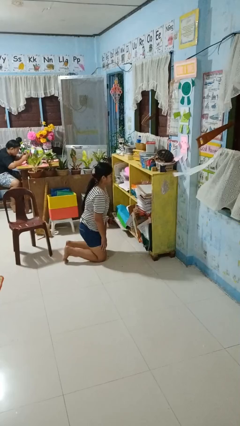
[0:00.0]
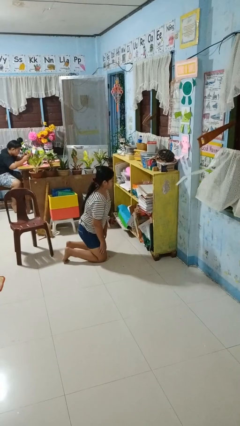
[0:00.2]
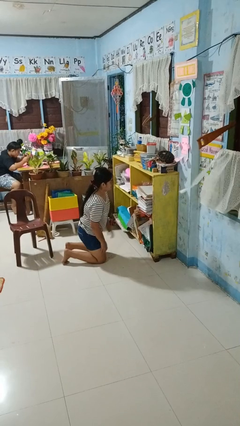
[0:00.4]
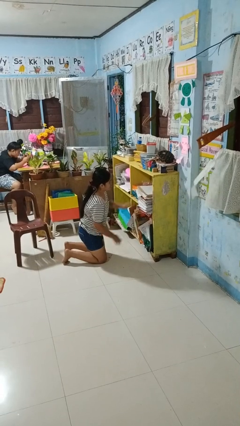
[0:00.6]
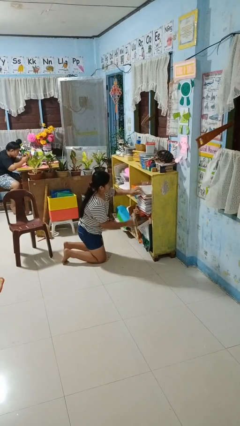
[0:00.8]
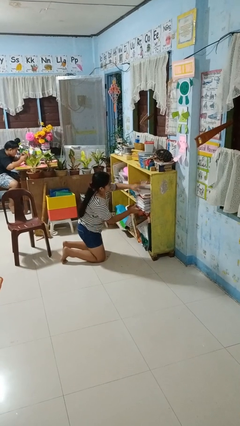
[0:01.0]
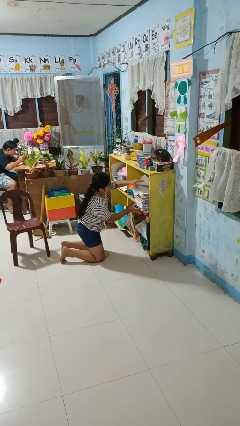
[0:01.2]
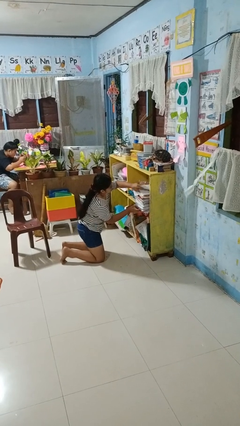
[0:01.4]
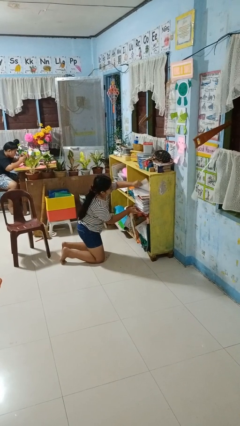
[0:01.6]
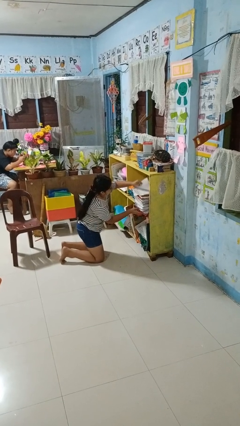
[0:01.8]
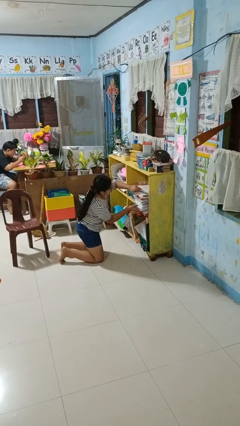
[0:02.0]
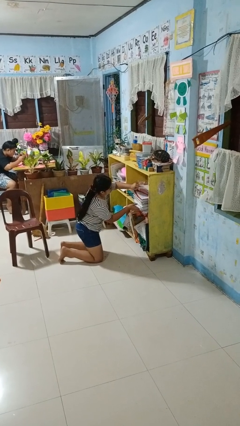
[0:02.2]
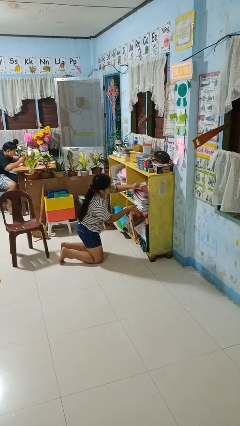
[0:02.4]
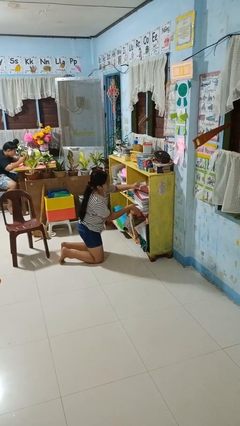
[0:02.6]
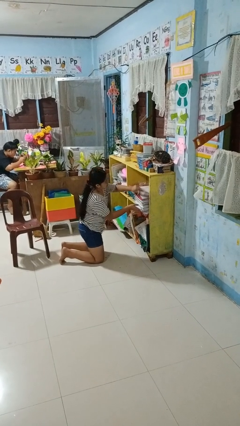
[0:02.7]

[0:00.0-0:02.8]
person searches in cabinet

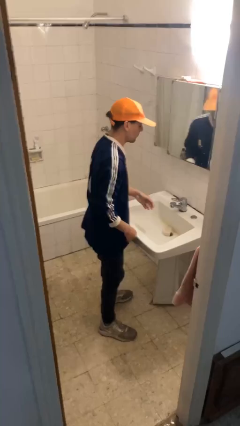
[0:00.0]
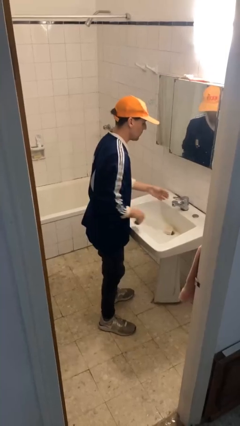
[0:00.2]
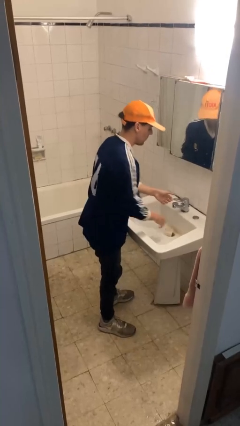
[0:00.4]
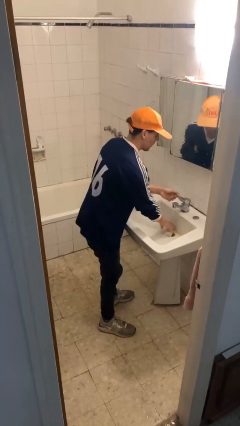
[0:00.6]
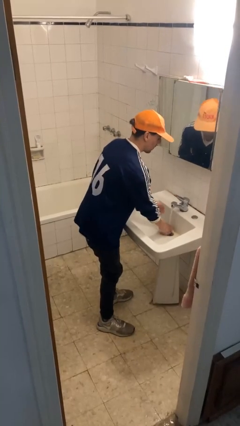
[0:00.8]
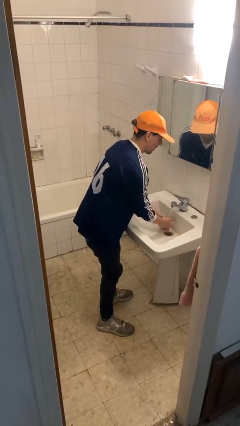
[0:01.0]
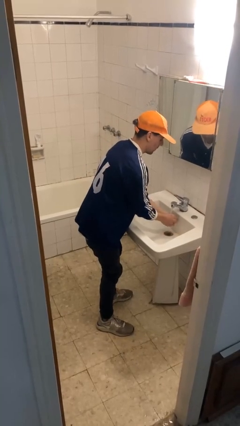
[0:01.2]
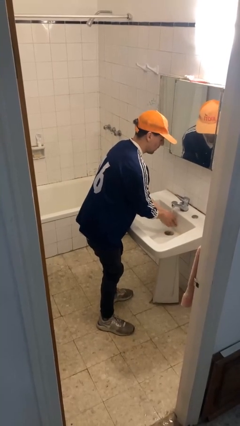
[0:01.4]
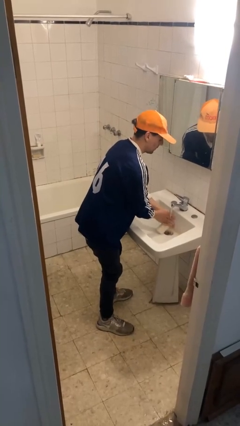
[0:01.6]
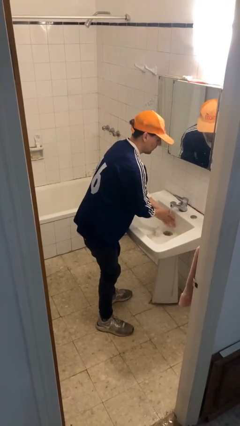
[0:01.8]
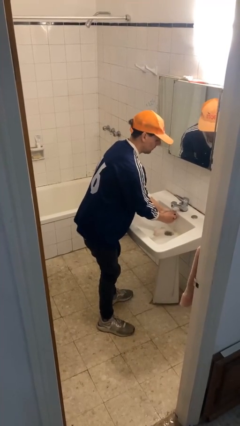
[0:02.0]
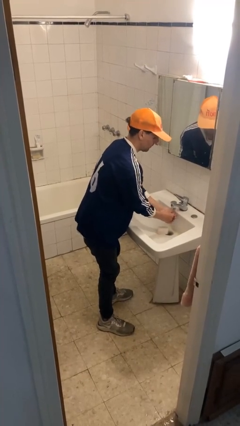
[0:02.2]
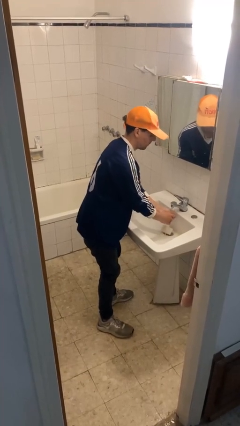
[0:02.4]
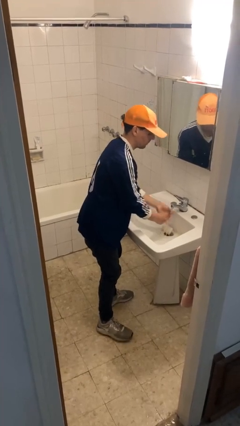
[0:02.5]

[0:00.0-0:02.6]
person washes hands

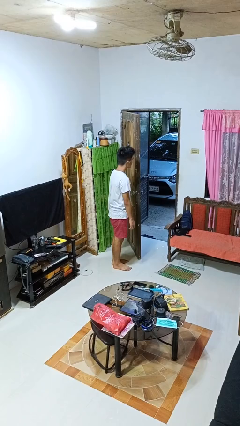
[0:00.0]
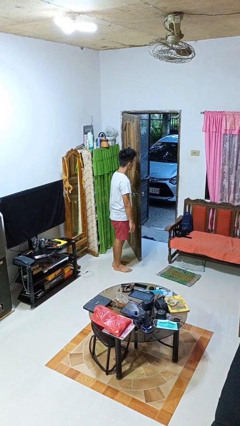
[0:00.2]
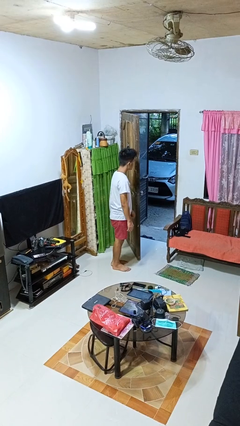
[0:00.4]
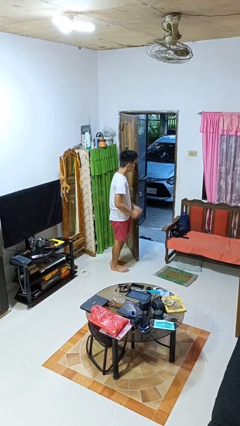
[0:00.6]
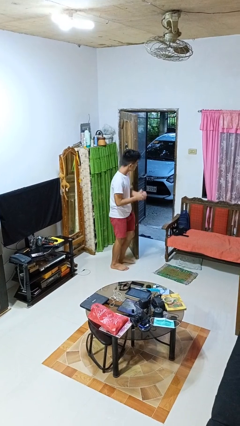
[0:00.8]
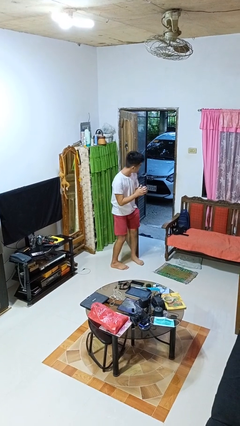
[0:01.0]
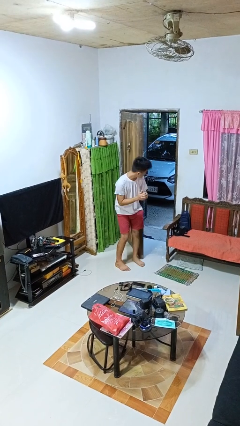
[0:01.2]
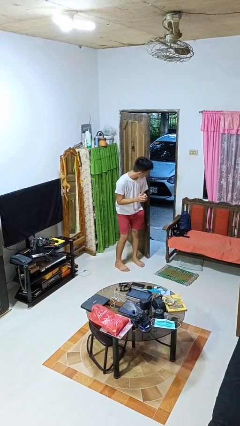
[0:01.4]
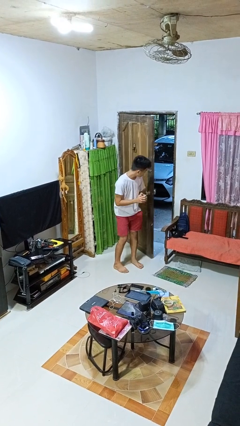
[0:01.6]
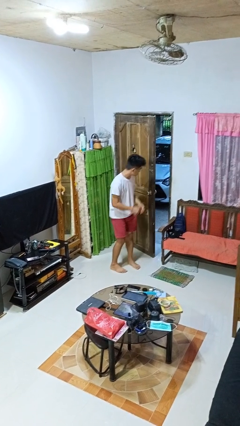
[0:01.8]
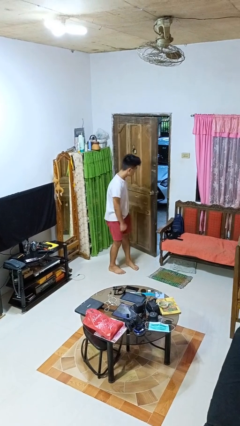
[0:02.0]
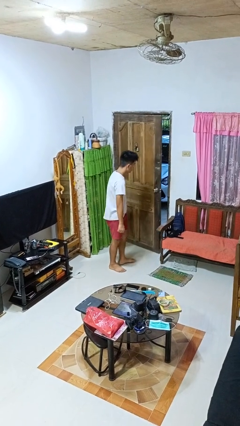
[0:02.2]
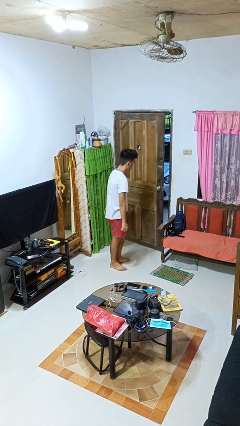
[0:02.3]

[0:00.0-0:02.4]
person closes door with hip

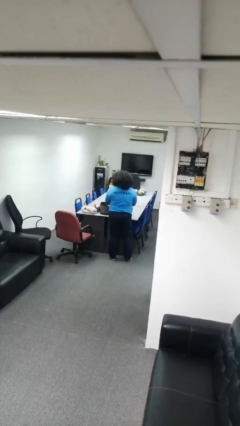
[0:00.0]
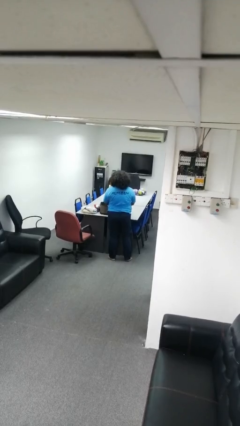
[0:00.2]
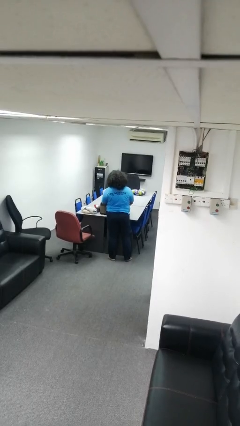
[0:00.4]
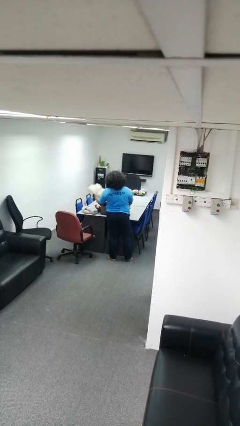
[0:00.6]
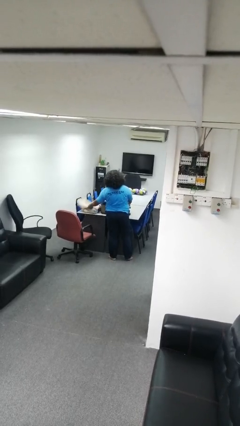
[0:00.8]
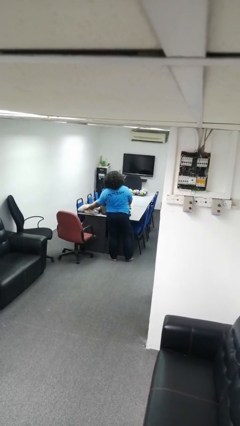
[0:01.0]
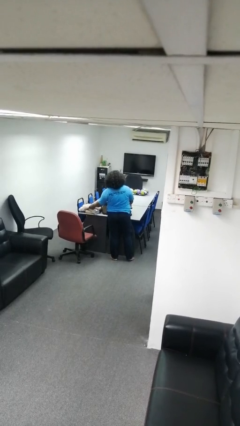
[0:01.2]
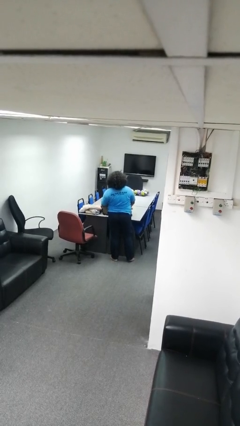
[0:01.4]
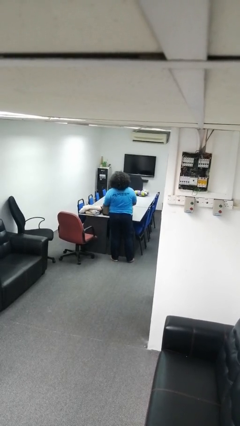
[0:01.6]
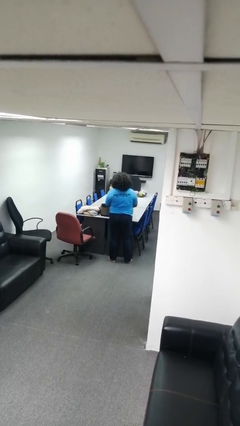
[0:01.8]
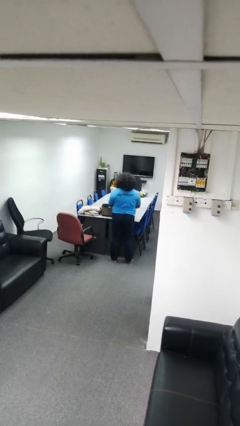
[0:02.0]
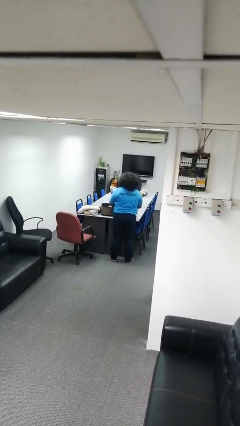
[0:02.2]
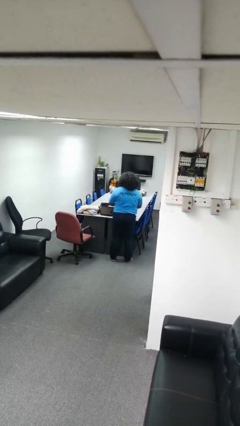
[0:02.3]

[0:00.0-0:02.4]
person unloads clothes from suitcase

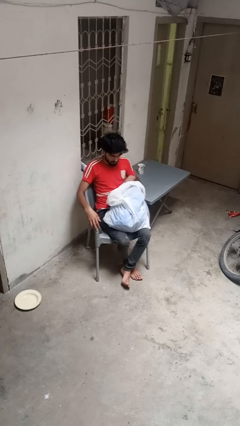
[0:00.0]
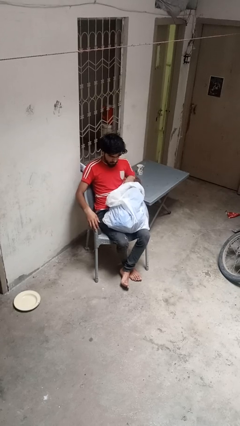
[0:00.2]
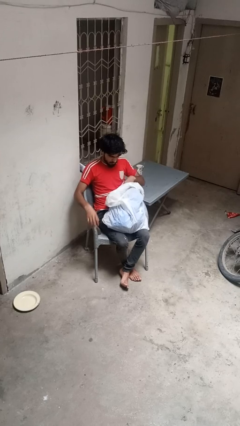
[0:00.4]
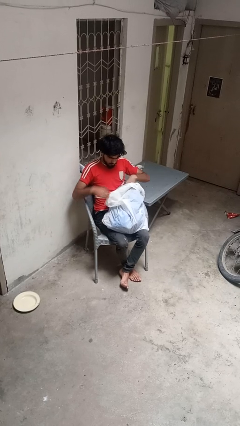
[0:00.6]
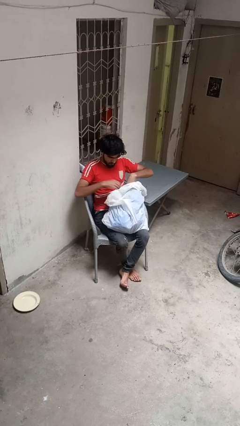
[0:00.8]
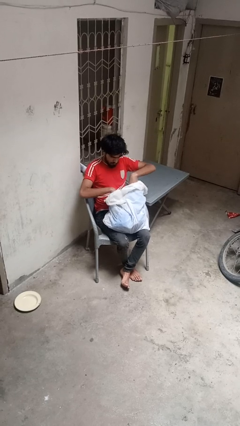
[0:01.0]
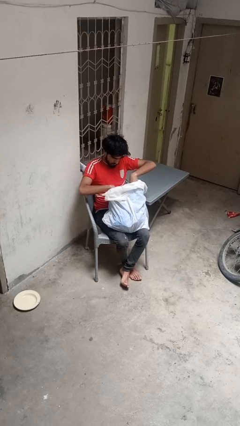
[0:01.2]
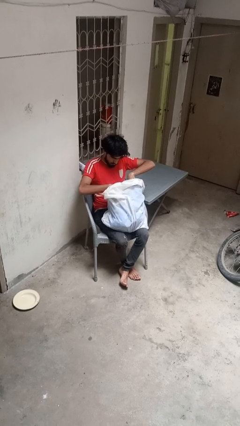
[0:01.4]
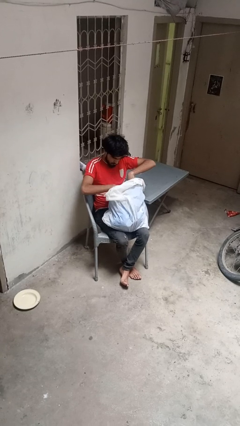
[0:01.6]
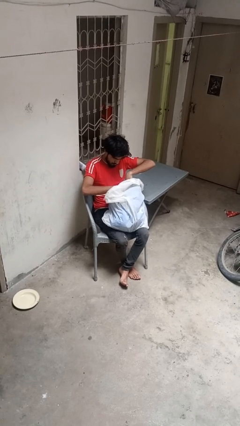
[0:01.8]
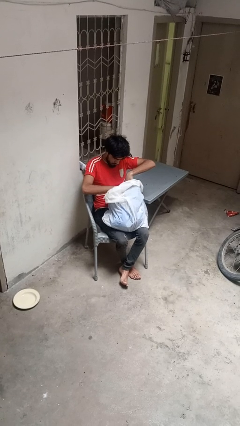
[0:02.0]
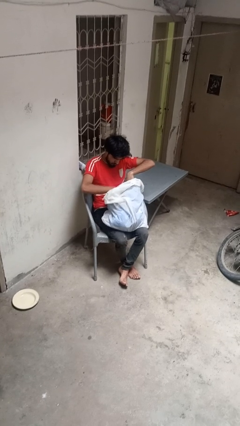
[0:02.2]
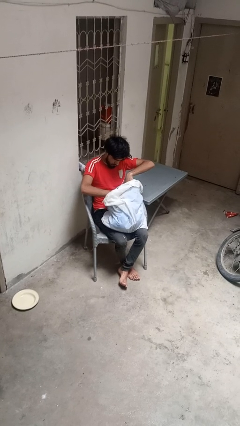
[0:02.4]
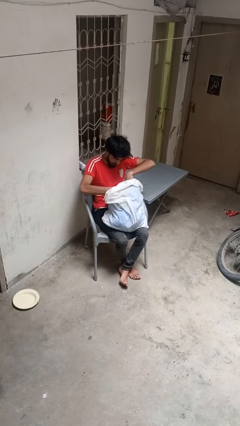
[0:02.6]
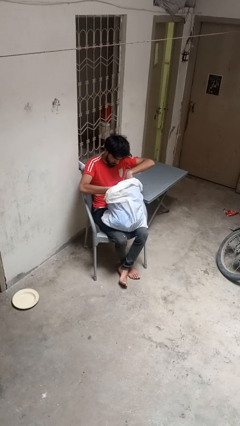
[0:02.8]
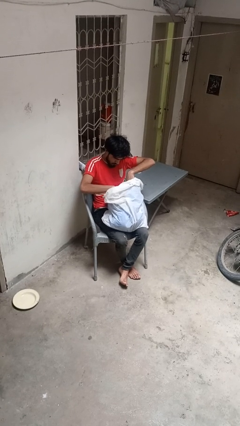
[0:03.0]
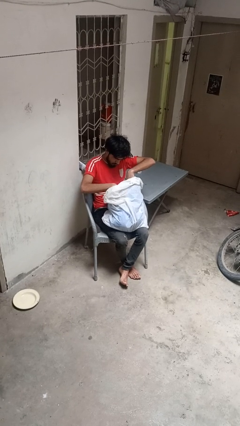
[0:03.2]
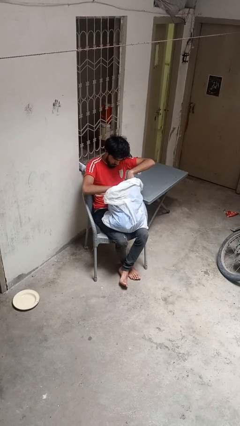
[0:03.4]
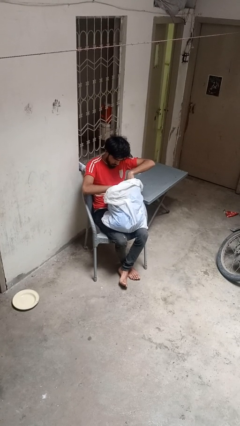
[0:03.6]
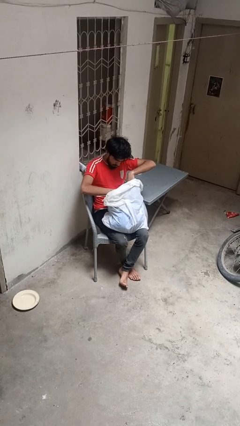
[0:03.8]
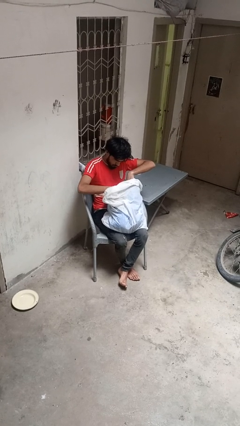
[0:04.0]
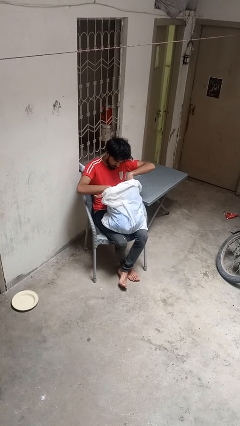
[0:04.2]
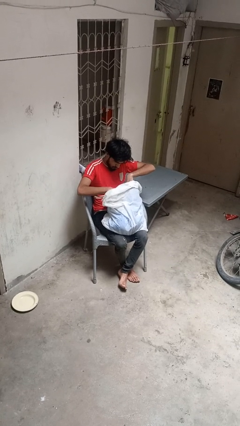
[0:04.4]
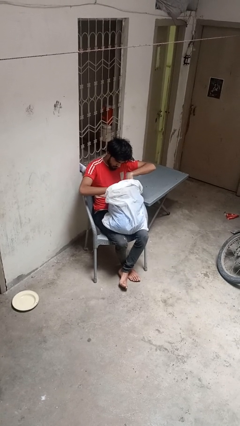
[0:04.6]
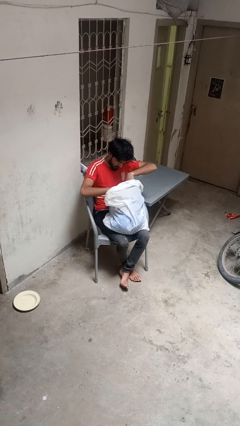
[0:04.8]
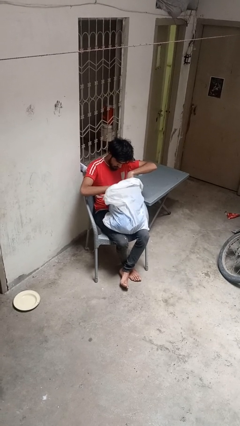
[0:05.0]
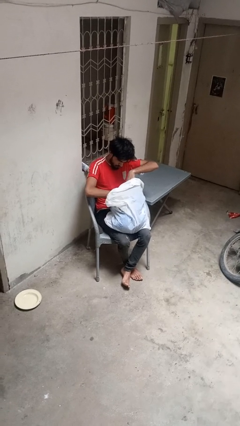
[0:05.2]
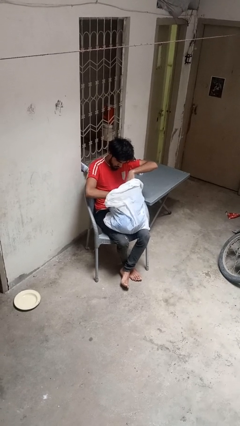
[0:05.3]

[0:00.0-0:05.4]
person searches in bag

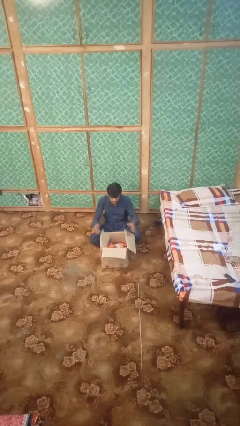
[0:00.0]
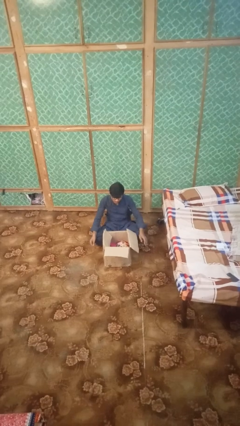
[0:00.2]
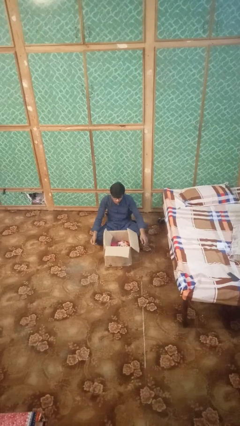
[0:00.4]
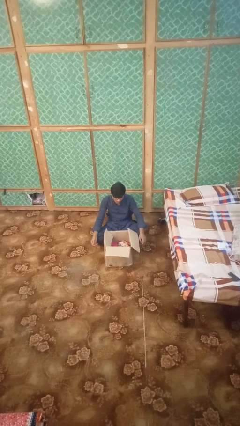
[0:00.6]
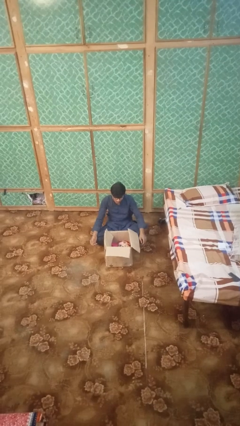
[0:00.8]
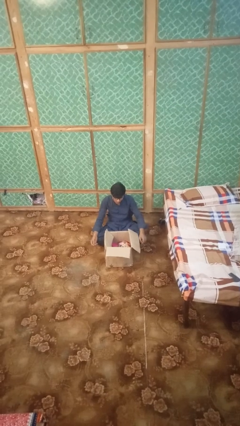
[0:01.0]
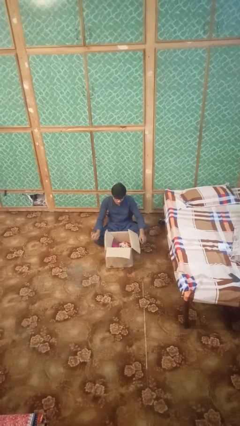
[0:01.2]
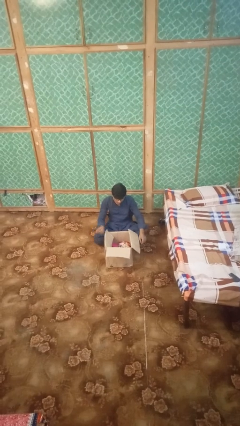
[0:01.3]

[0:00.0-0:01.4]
person puts object into box

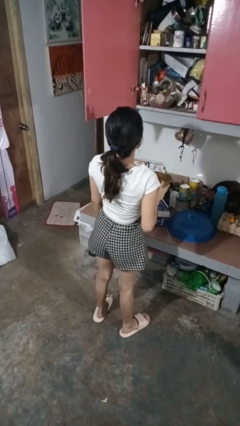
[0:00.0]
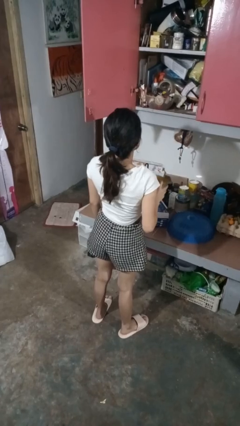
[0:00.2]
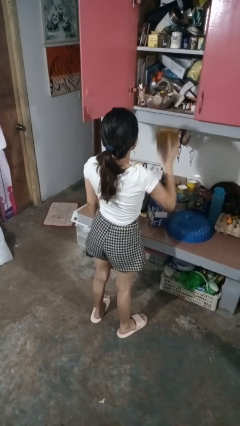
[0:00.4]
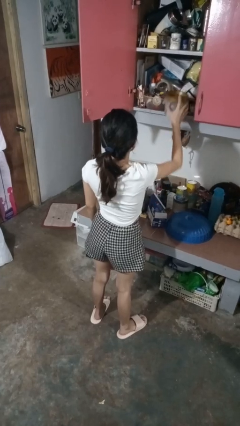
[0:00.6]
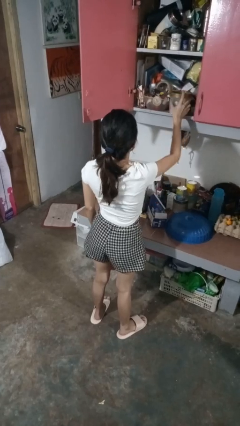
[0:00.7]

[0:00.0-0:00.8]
person puts down object into cabinet
